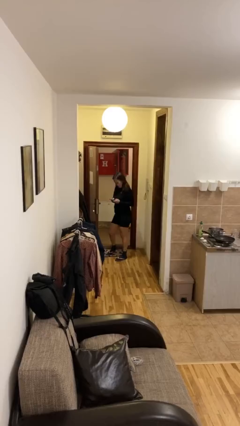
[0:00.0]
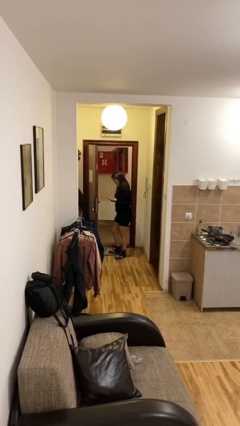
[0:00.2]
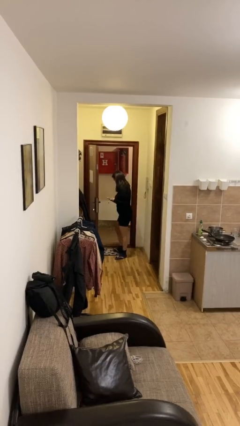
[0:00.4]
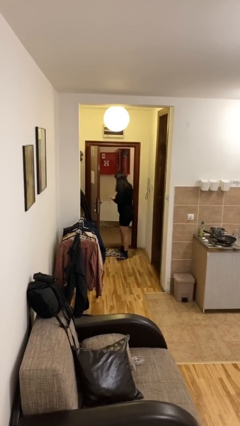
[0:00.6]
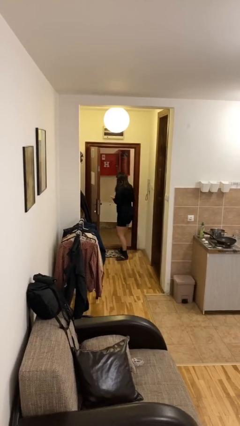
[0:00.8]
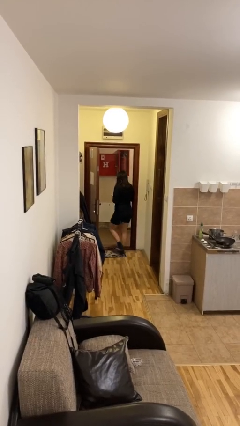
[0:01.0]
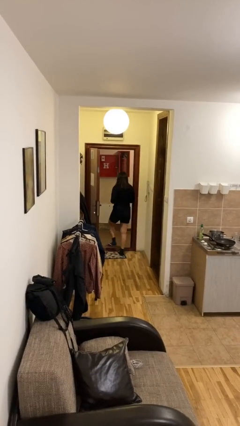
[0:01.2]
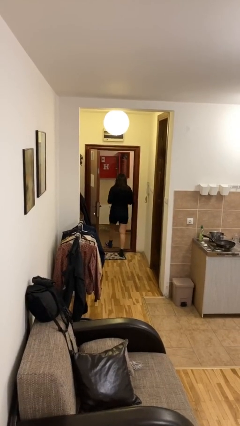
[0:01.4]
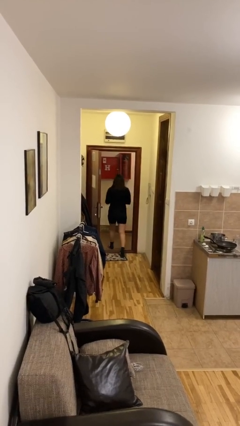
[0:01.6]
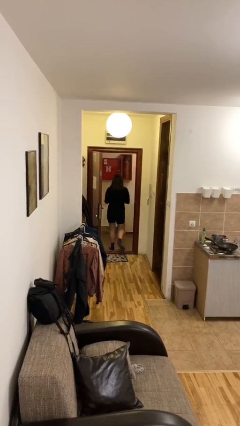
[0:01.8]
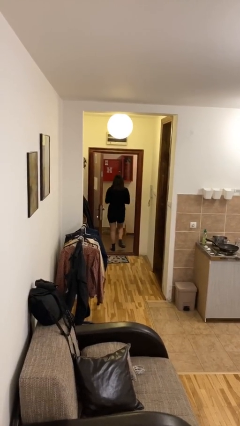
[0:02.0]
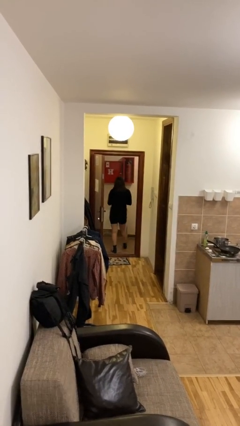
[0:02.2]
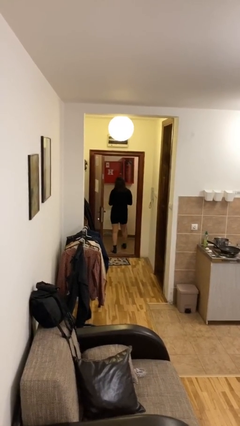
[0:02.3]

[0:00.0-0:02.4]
person exits scene through structure

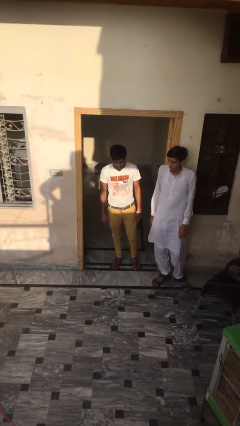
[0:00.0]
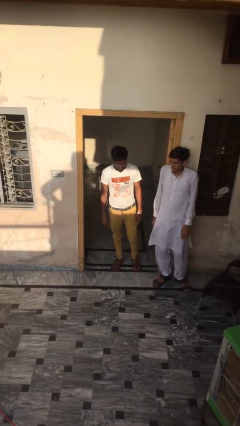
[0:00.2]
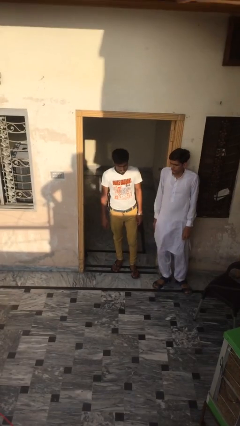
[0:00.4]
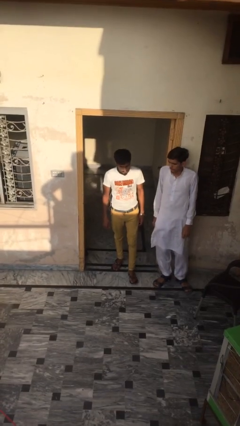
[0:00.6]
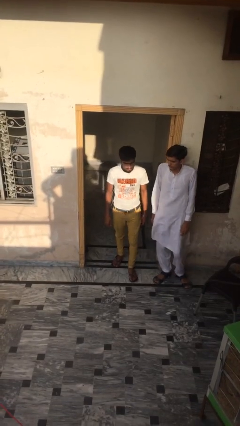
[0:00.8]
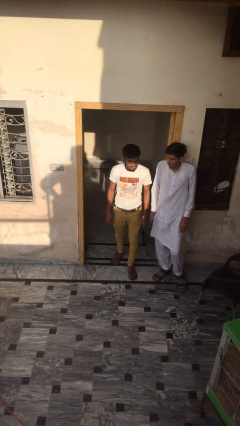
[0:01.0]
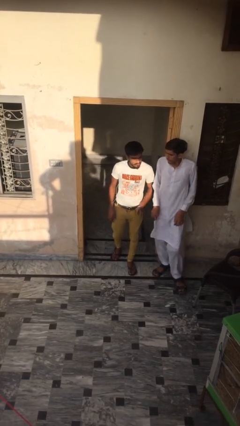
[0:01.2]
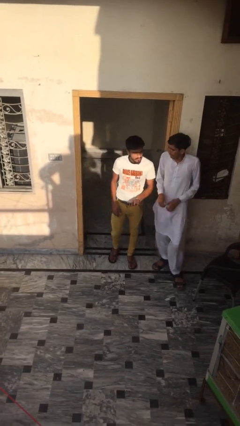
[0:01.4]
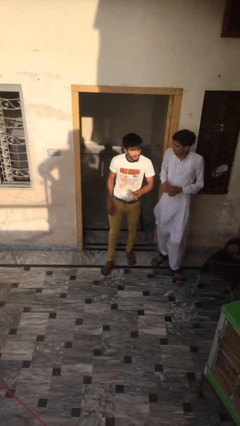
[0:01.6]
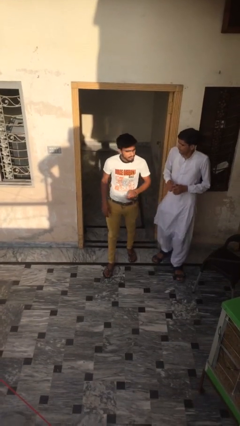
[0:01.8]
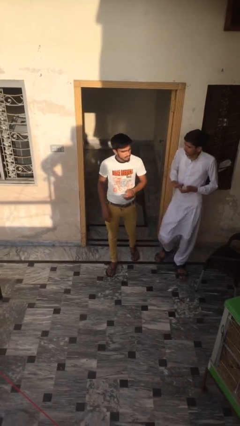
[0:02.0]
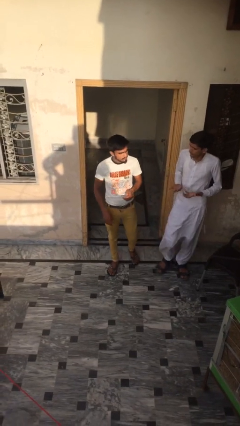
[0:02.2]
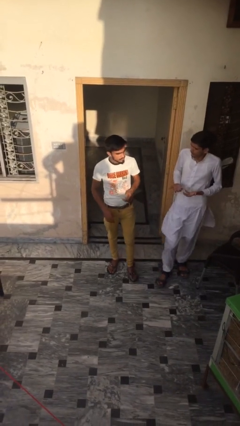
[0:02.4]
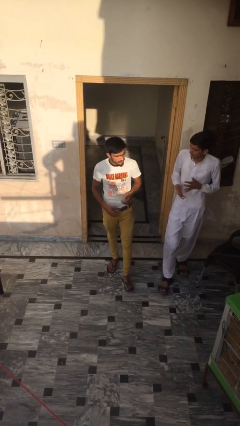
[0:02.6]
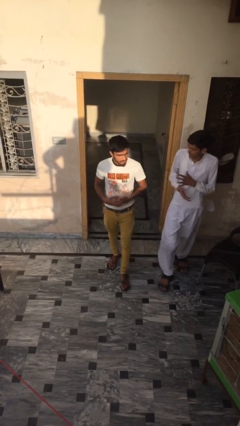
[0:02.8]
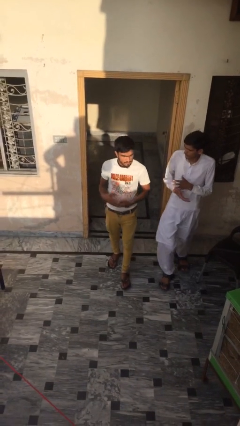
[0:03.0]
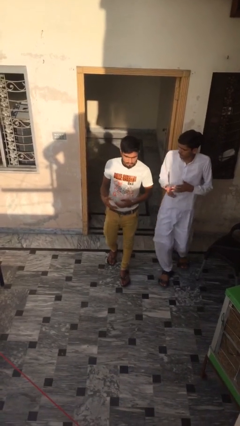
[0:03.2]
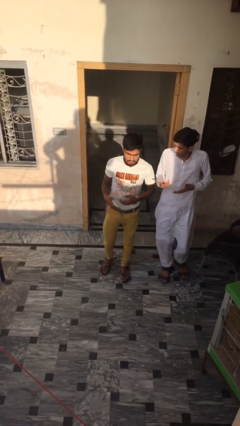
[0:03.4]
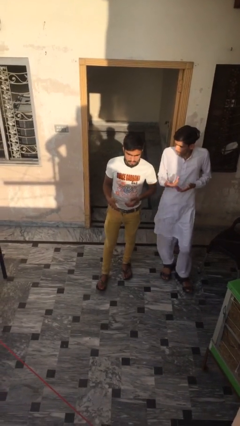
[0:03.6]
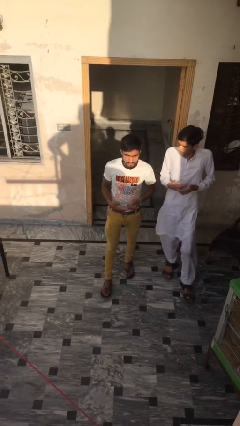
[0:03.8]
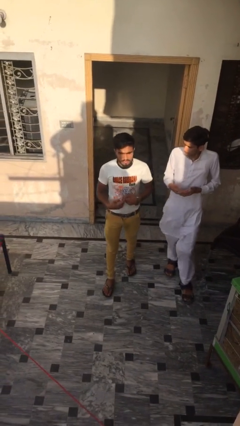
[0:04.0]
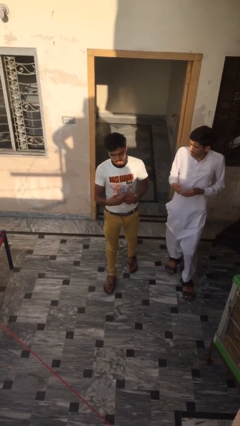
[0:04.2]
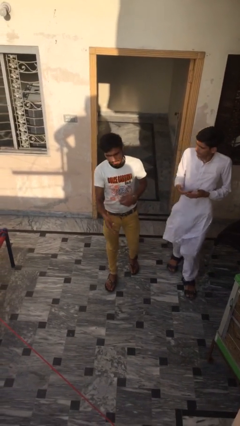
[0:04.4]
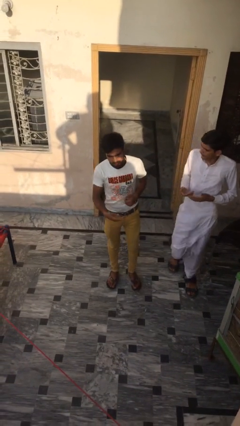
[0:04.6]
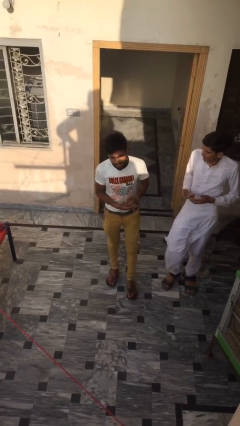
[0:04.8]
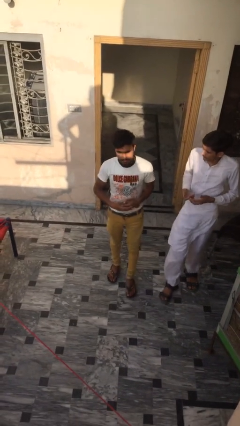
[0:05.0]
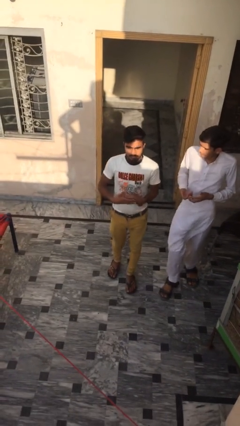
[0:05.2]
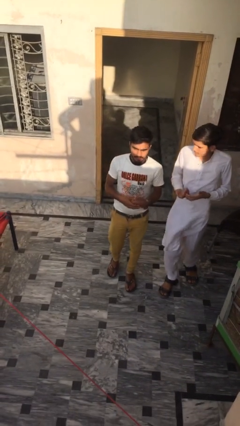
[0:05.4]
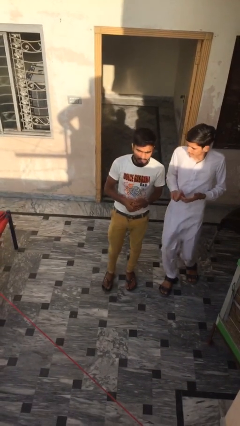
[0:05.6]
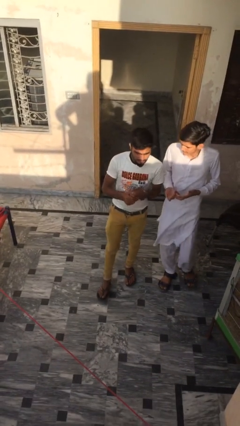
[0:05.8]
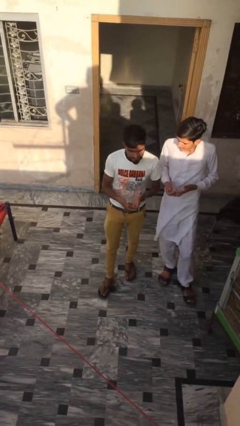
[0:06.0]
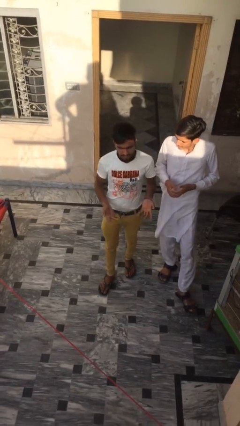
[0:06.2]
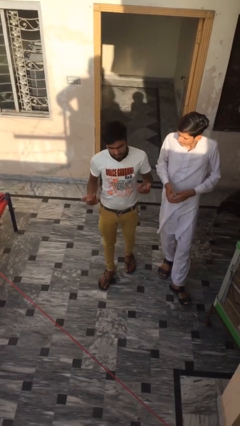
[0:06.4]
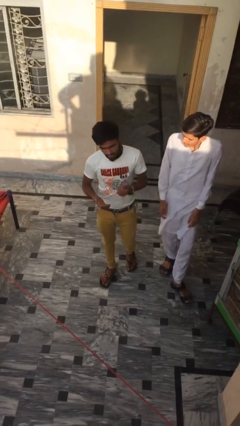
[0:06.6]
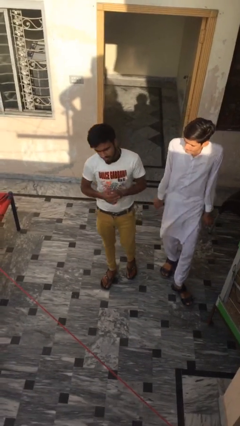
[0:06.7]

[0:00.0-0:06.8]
person talks to person

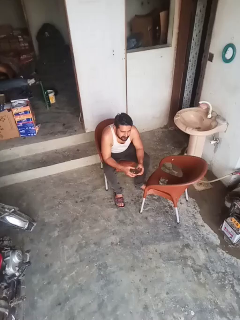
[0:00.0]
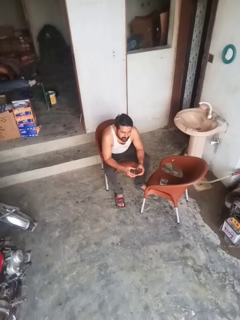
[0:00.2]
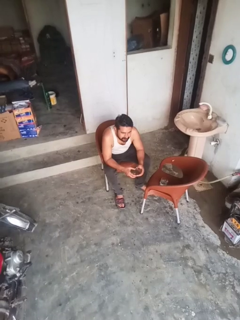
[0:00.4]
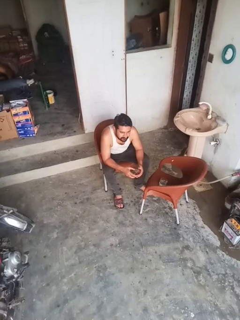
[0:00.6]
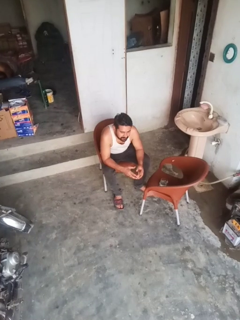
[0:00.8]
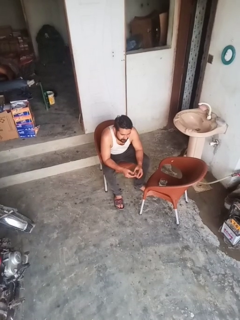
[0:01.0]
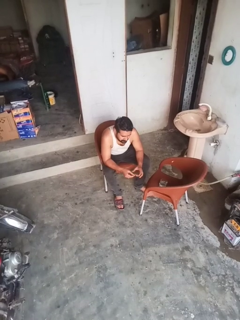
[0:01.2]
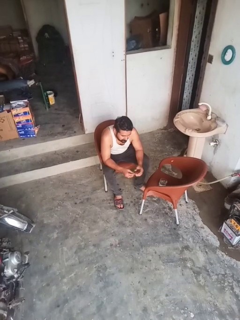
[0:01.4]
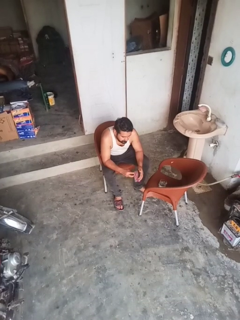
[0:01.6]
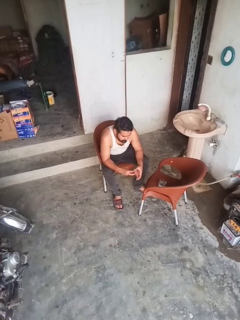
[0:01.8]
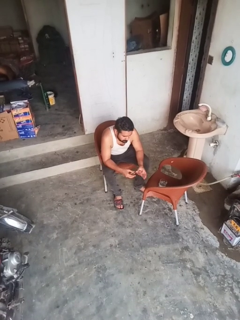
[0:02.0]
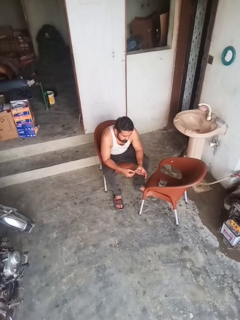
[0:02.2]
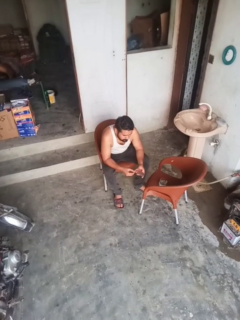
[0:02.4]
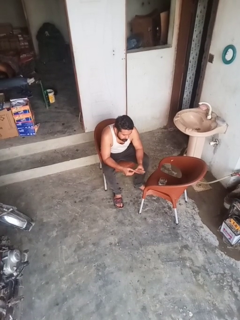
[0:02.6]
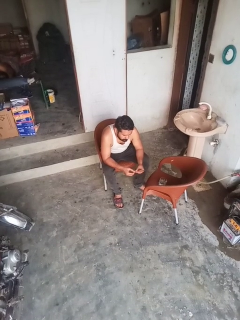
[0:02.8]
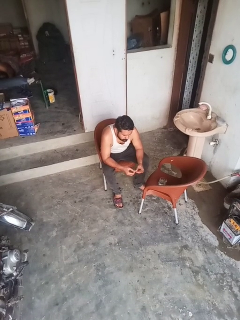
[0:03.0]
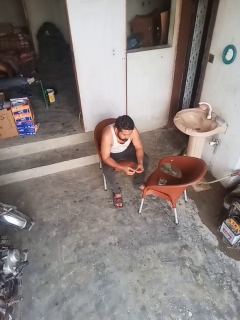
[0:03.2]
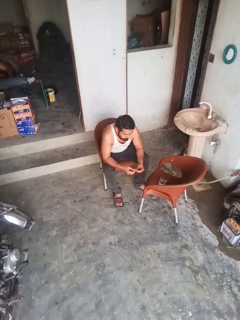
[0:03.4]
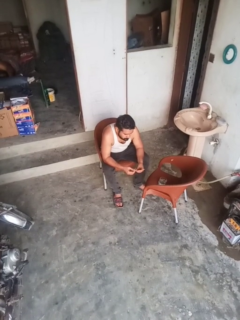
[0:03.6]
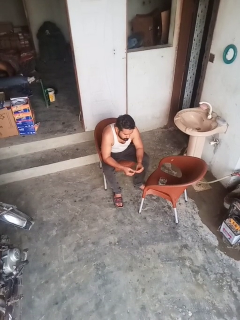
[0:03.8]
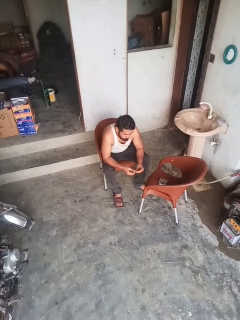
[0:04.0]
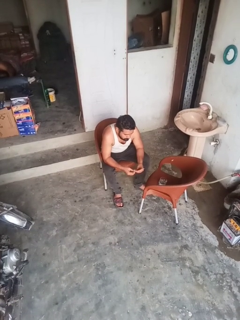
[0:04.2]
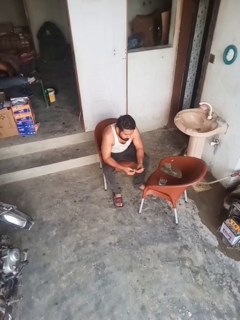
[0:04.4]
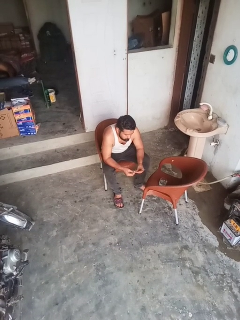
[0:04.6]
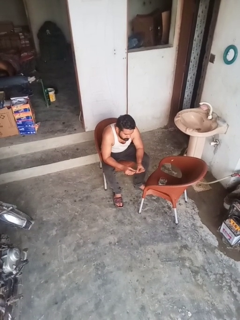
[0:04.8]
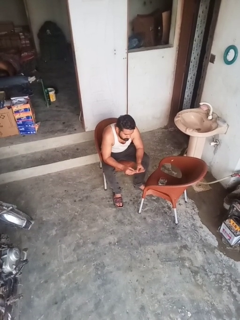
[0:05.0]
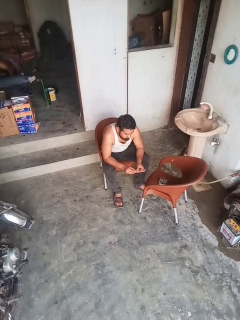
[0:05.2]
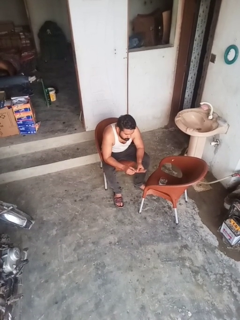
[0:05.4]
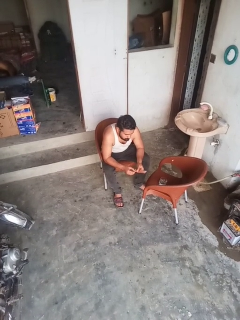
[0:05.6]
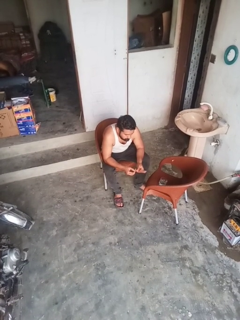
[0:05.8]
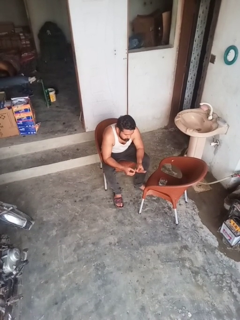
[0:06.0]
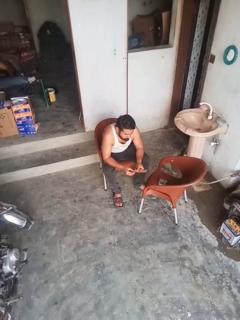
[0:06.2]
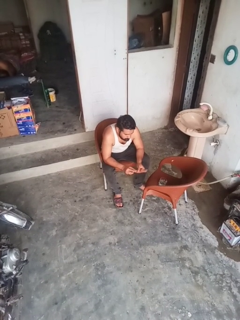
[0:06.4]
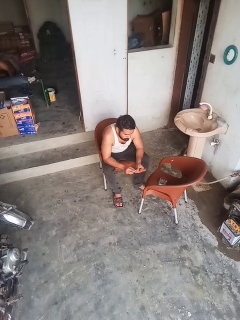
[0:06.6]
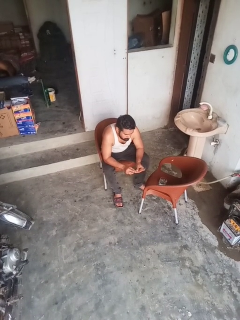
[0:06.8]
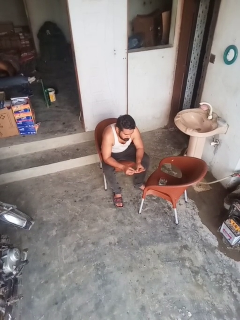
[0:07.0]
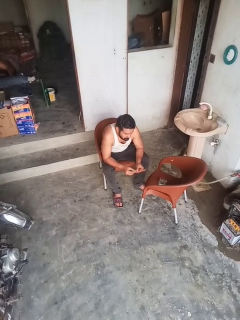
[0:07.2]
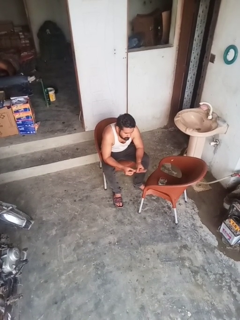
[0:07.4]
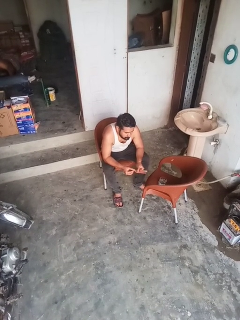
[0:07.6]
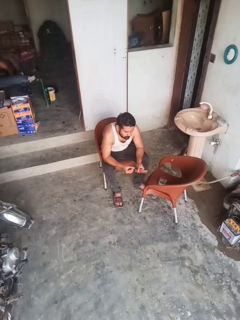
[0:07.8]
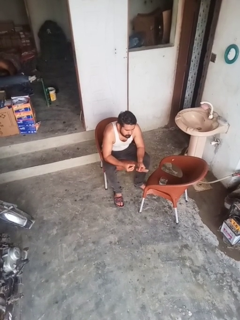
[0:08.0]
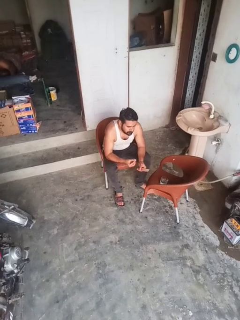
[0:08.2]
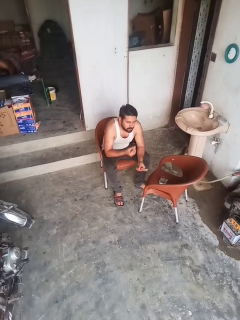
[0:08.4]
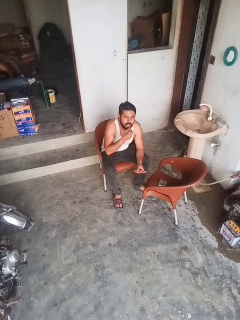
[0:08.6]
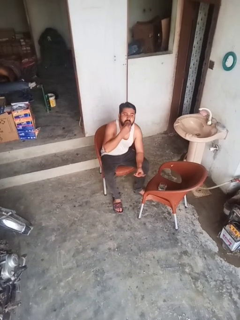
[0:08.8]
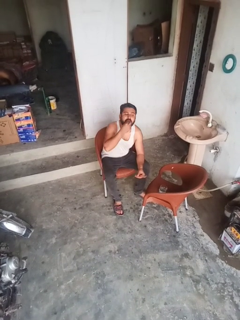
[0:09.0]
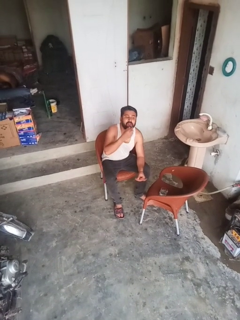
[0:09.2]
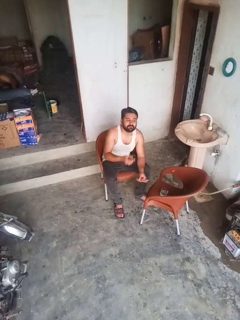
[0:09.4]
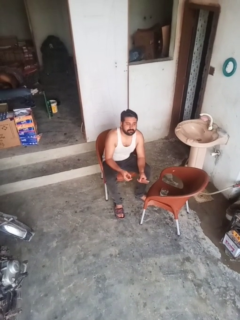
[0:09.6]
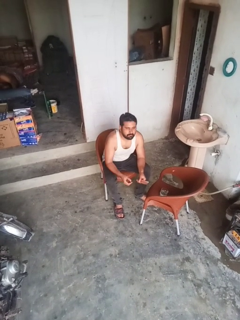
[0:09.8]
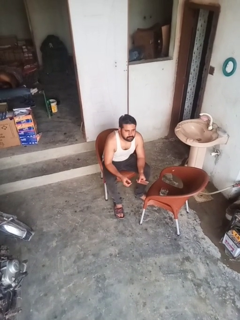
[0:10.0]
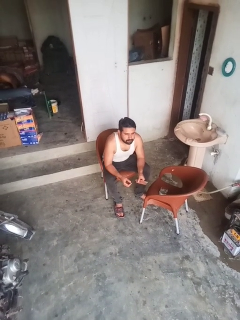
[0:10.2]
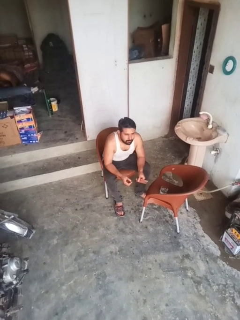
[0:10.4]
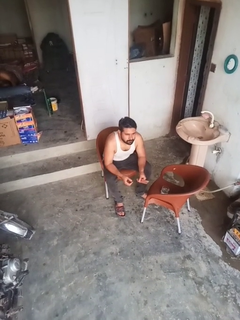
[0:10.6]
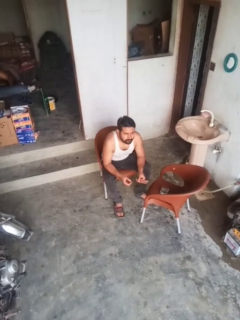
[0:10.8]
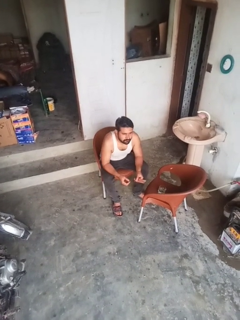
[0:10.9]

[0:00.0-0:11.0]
person takes medicine pills
